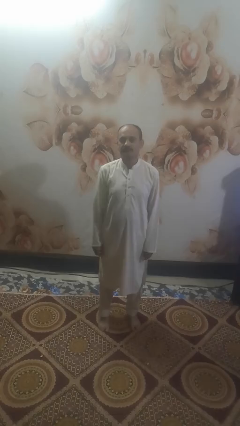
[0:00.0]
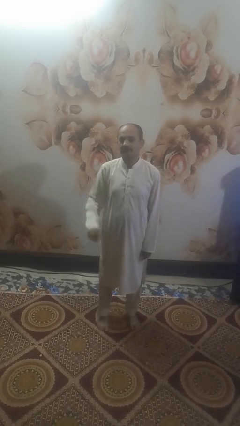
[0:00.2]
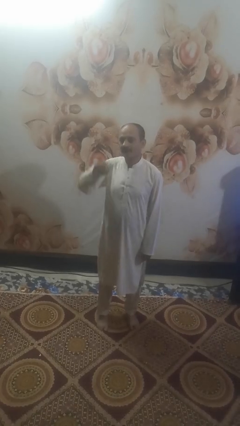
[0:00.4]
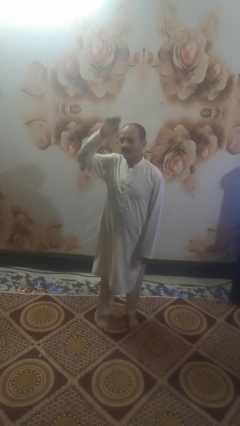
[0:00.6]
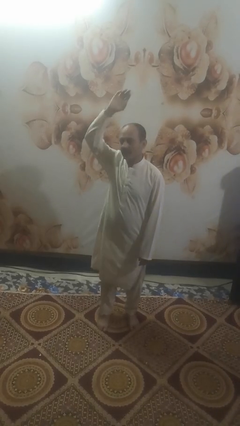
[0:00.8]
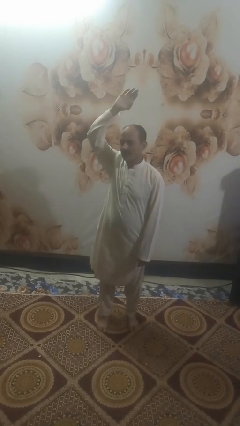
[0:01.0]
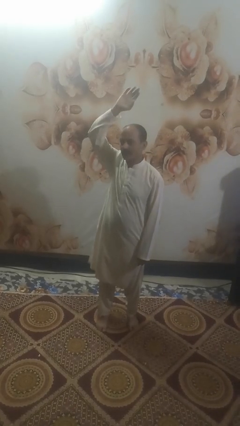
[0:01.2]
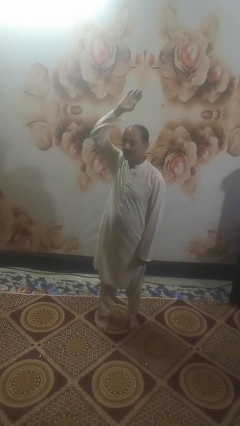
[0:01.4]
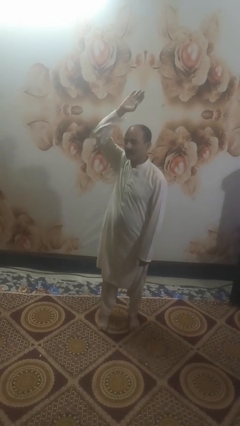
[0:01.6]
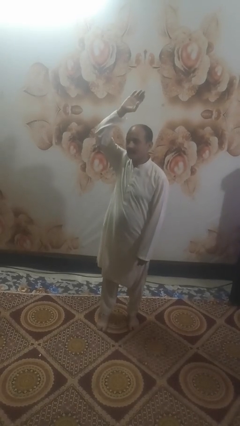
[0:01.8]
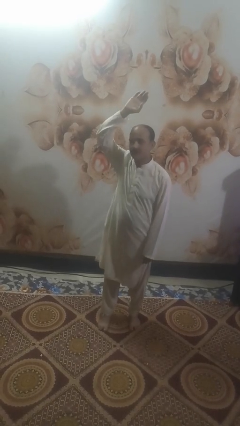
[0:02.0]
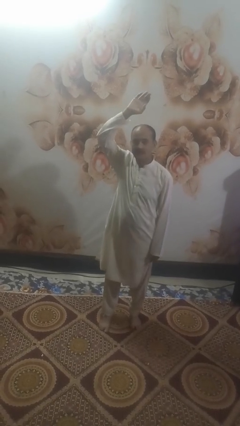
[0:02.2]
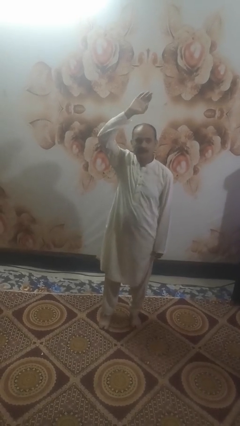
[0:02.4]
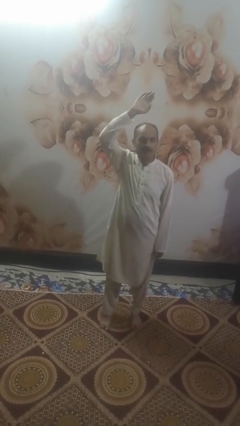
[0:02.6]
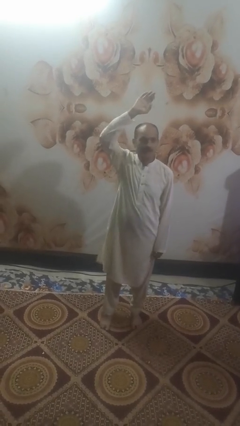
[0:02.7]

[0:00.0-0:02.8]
person gestures raise hand

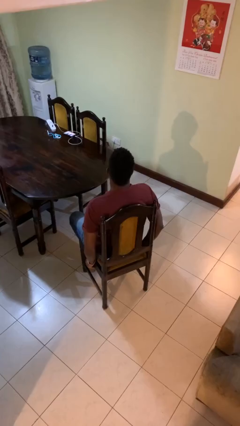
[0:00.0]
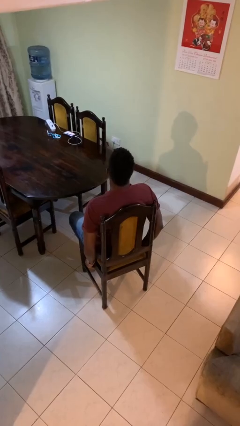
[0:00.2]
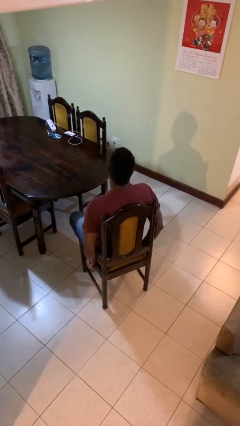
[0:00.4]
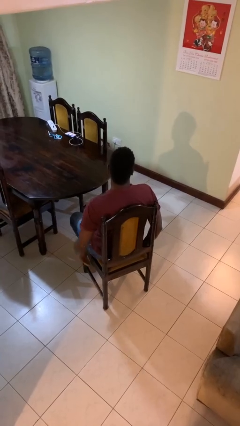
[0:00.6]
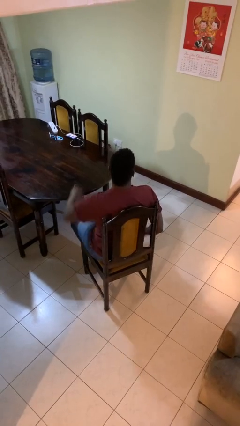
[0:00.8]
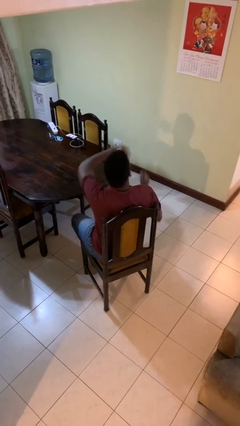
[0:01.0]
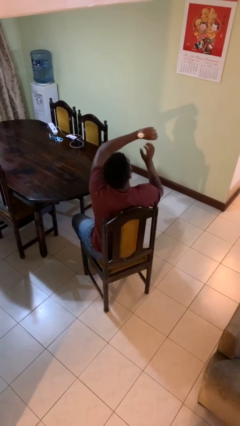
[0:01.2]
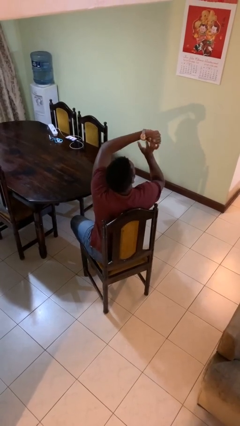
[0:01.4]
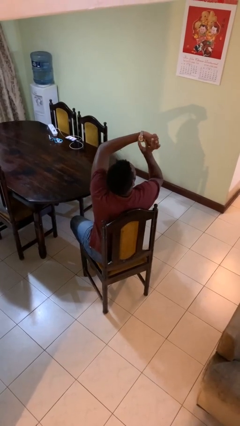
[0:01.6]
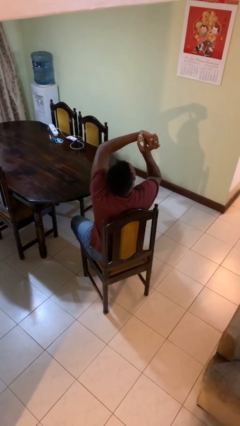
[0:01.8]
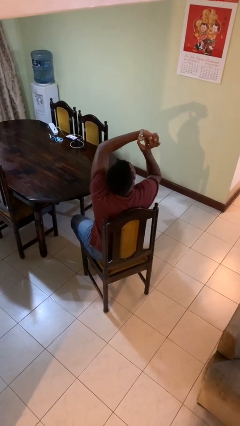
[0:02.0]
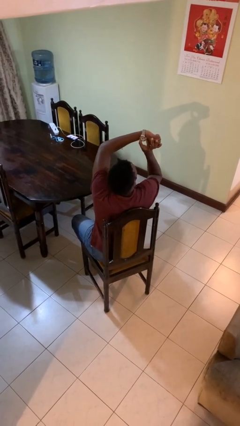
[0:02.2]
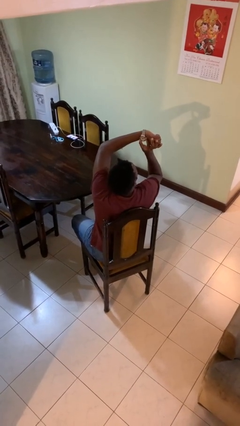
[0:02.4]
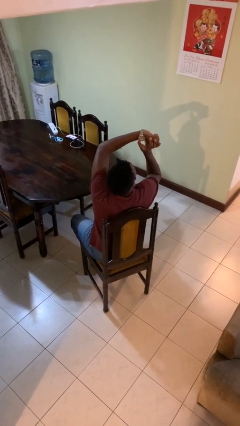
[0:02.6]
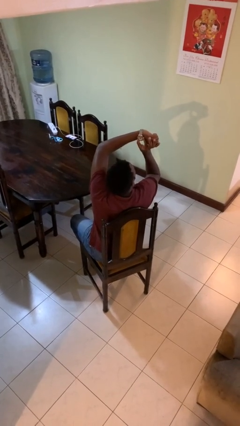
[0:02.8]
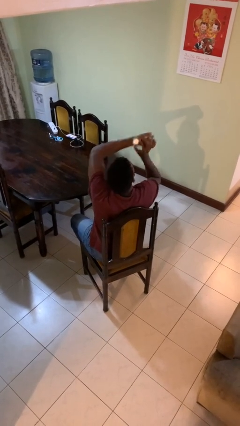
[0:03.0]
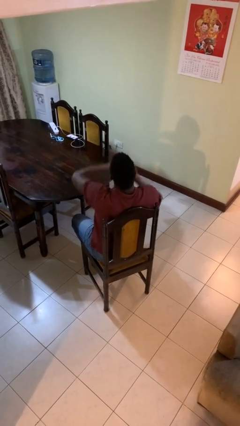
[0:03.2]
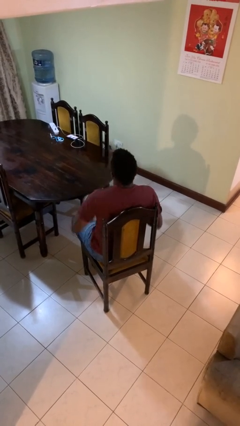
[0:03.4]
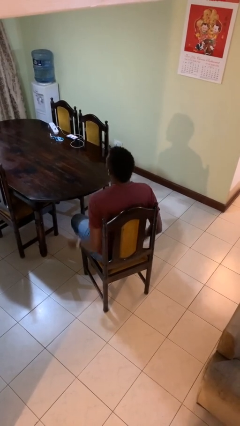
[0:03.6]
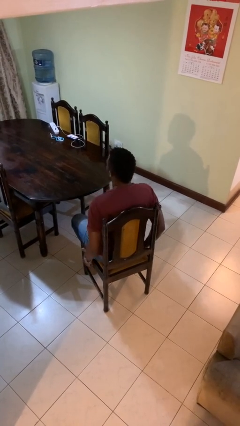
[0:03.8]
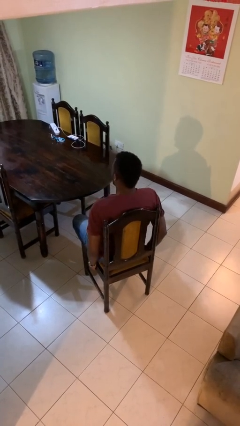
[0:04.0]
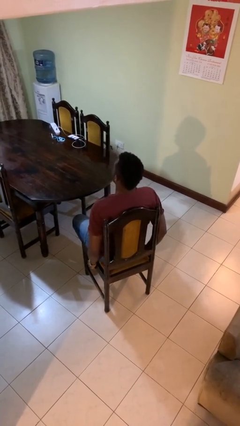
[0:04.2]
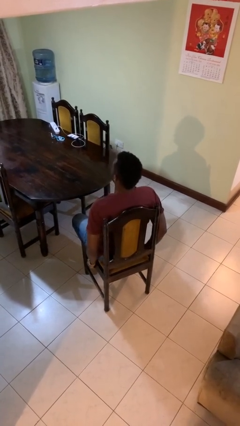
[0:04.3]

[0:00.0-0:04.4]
person looks at wristwatch

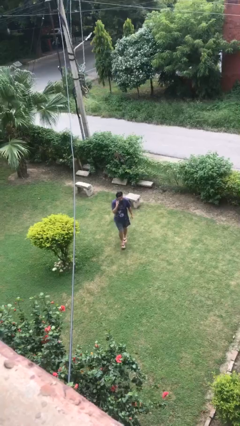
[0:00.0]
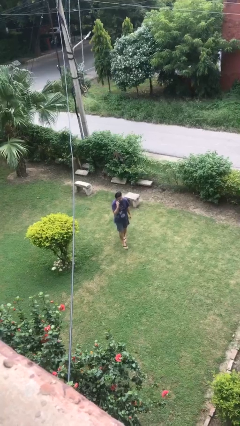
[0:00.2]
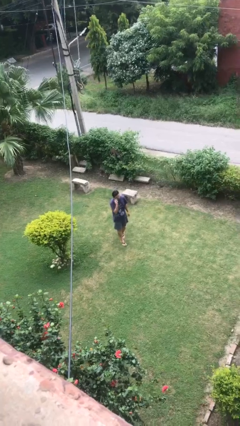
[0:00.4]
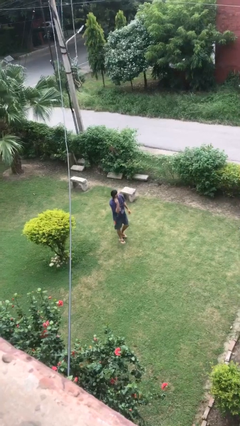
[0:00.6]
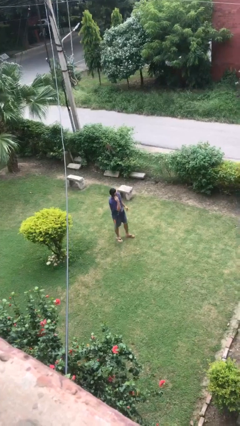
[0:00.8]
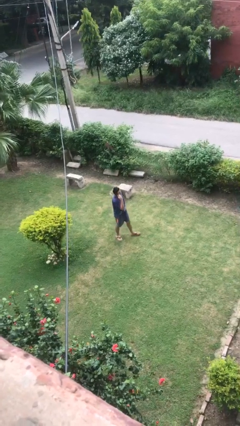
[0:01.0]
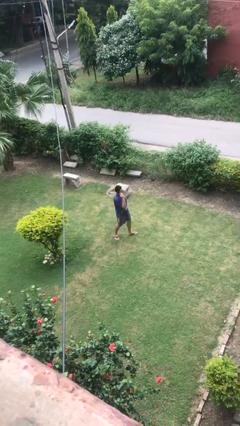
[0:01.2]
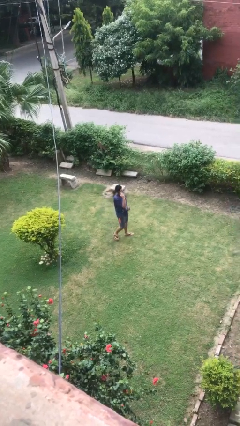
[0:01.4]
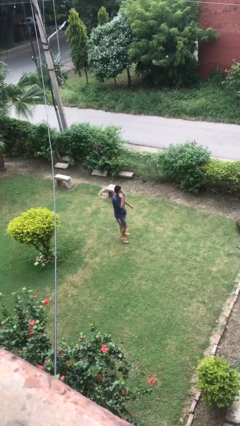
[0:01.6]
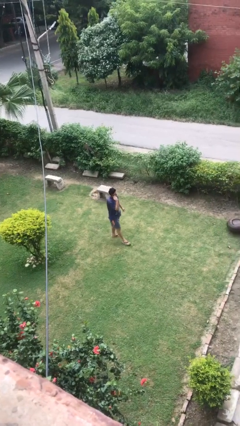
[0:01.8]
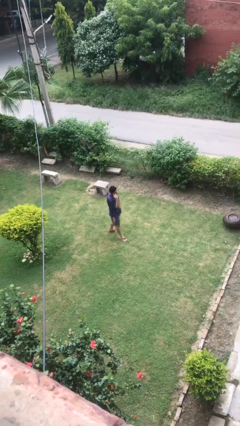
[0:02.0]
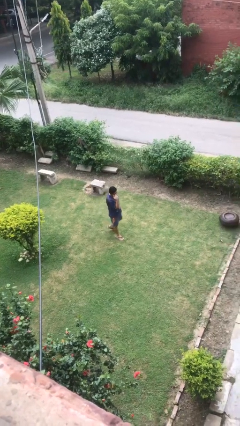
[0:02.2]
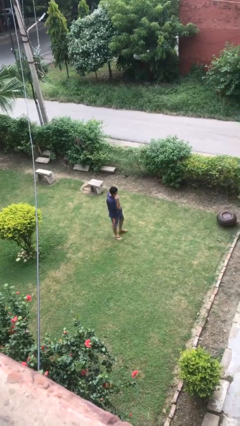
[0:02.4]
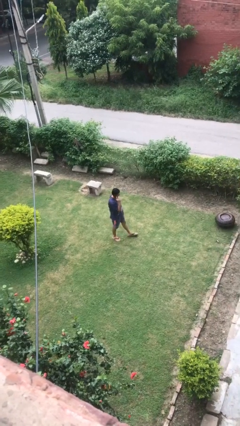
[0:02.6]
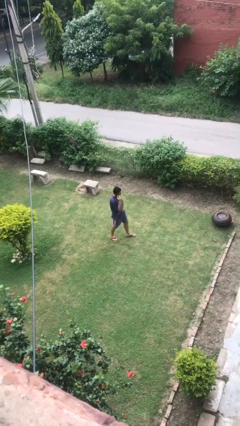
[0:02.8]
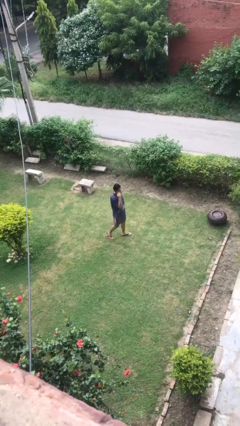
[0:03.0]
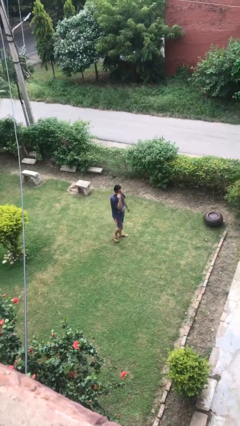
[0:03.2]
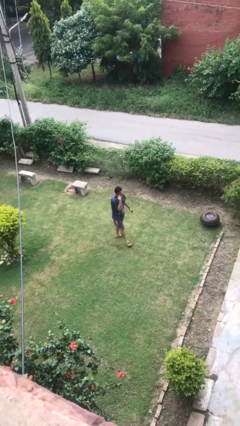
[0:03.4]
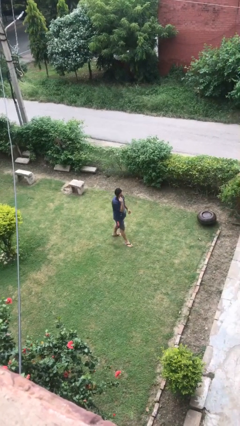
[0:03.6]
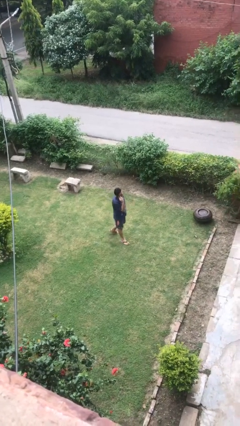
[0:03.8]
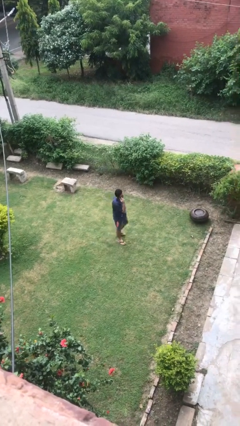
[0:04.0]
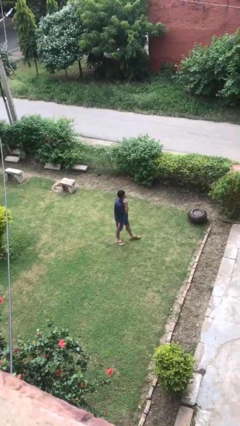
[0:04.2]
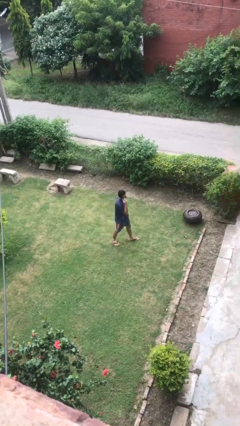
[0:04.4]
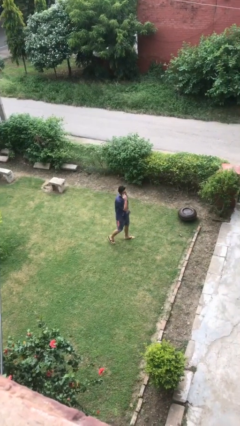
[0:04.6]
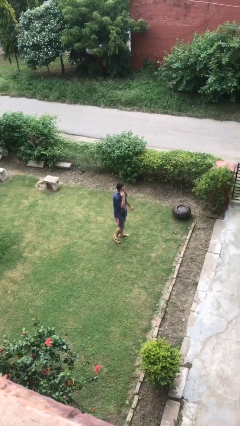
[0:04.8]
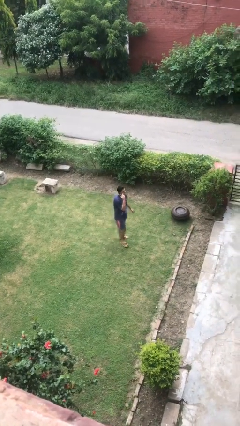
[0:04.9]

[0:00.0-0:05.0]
person talks on phone

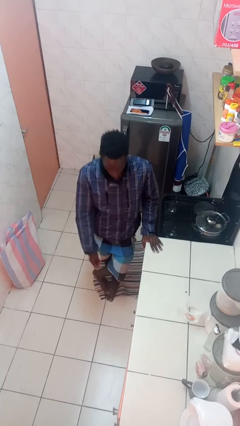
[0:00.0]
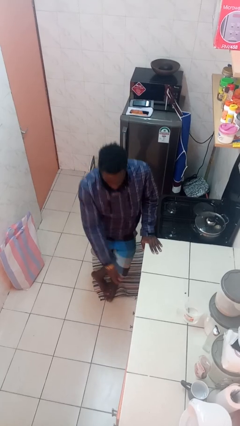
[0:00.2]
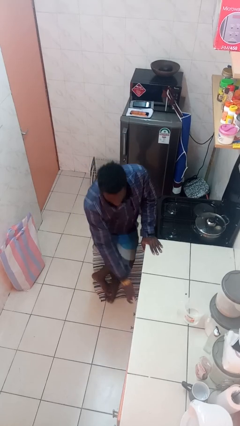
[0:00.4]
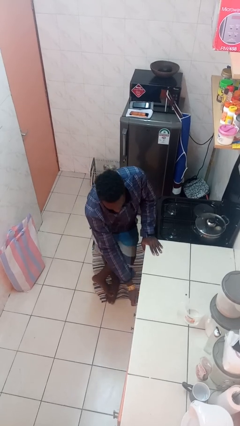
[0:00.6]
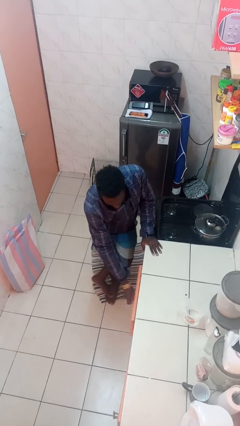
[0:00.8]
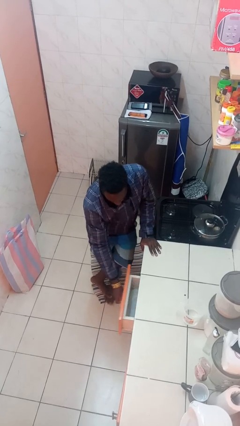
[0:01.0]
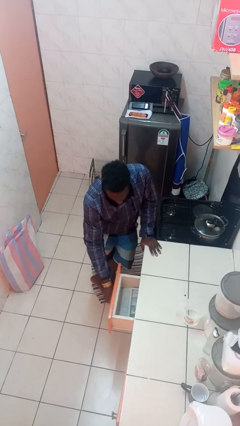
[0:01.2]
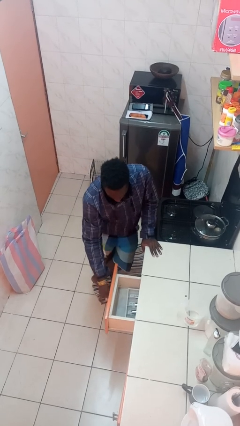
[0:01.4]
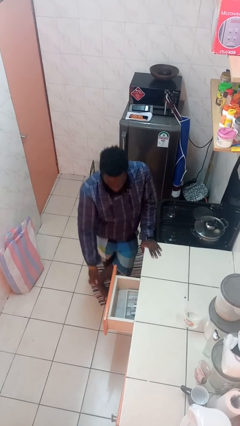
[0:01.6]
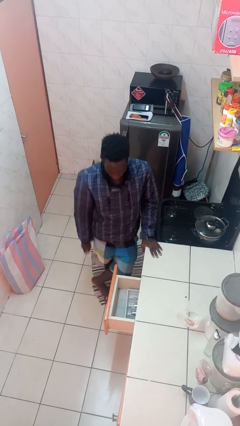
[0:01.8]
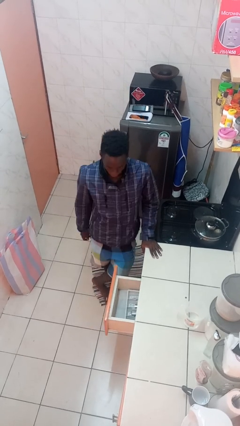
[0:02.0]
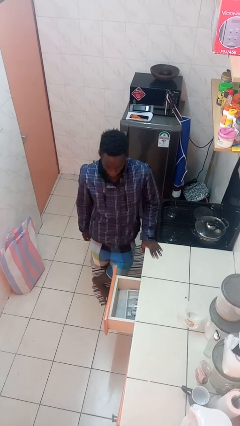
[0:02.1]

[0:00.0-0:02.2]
person opens kitchen drawer

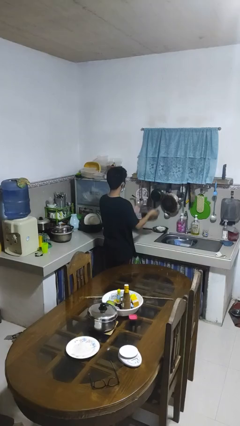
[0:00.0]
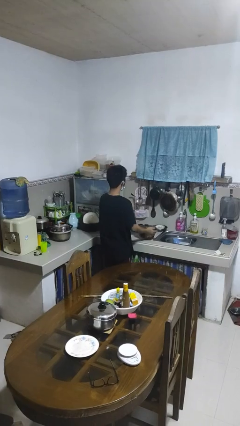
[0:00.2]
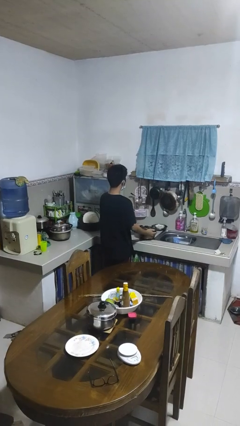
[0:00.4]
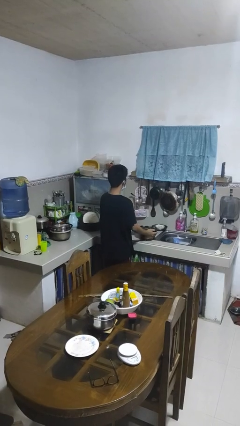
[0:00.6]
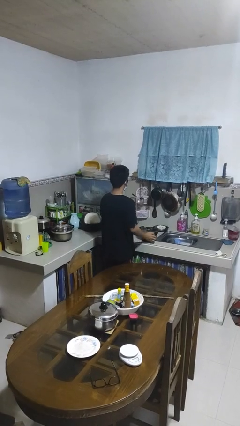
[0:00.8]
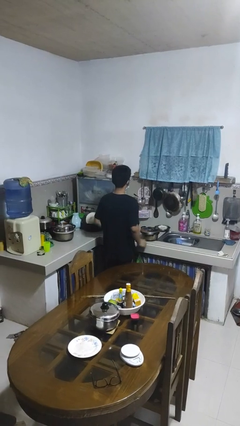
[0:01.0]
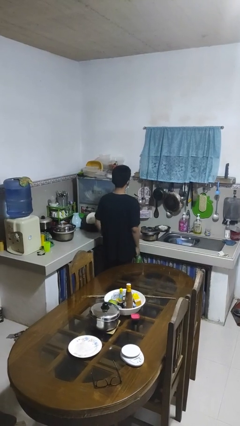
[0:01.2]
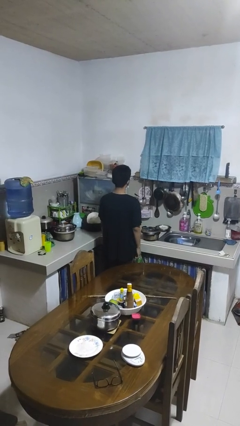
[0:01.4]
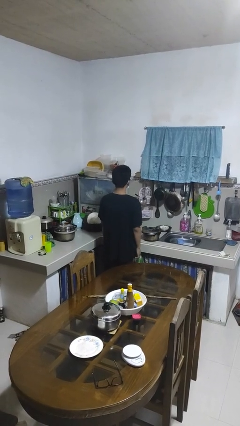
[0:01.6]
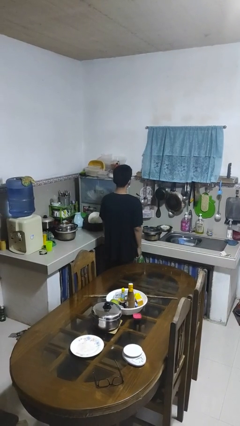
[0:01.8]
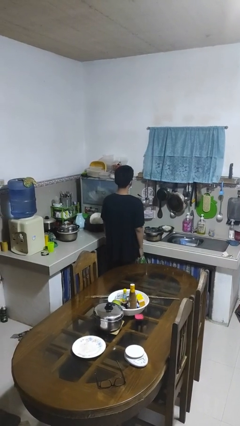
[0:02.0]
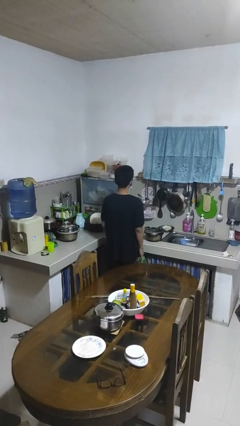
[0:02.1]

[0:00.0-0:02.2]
person puts down object on countertop

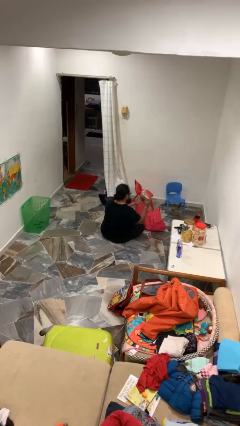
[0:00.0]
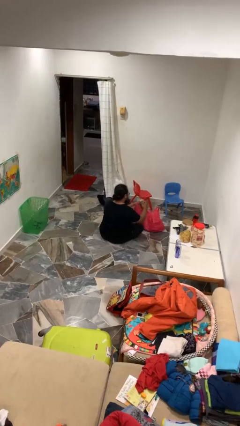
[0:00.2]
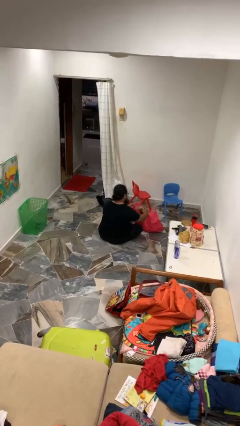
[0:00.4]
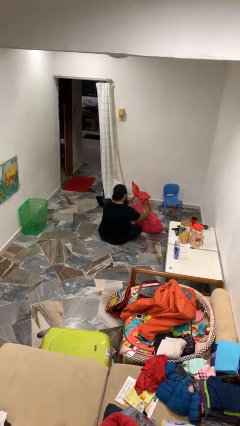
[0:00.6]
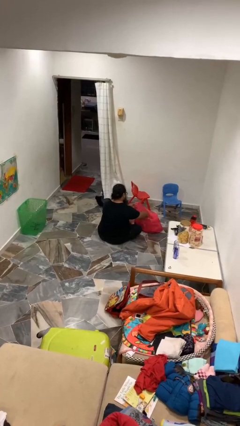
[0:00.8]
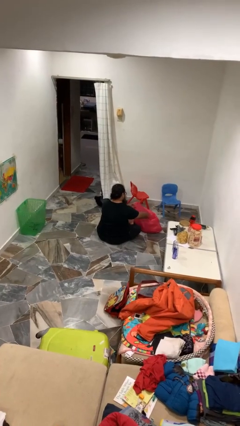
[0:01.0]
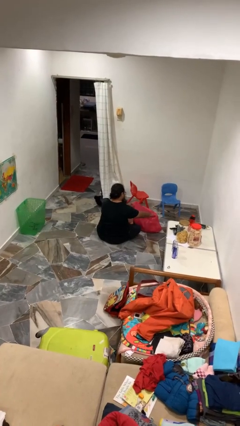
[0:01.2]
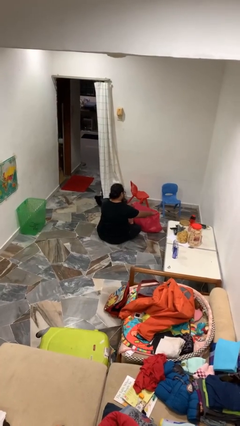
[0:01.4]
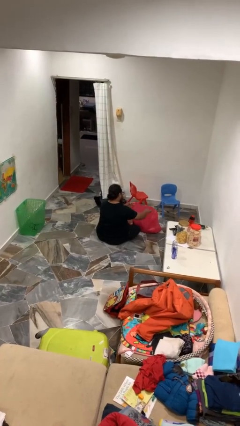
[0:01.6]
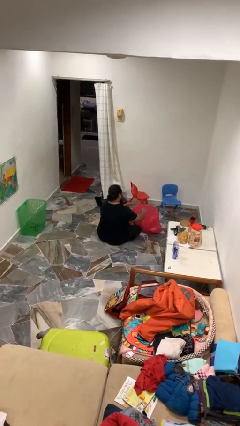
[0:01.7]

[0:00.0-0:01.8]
person puts object into bag
